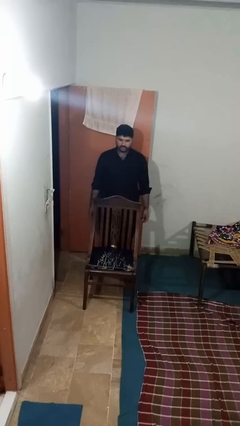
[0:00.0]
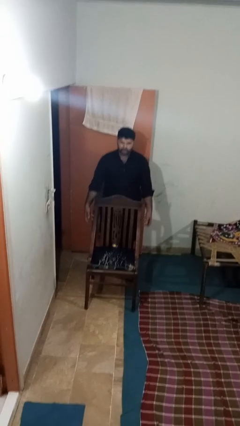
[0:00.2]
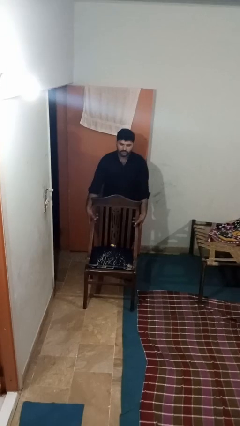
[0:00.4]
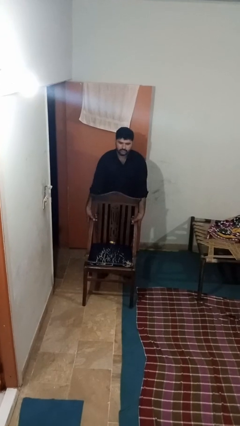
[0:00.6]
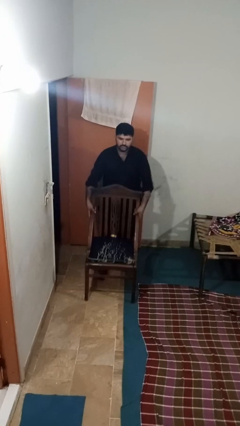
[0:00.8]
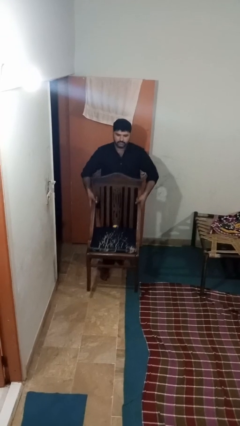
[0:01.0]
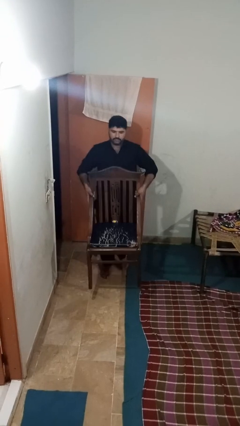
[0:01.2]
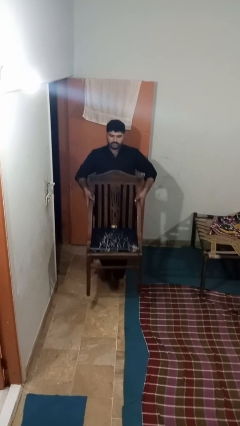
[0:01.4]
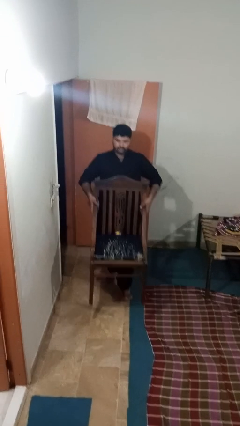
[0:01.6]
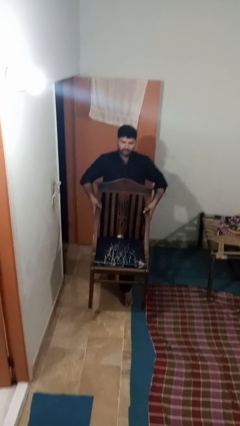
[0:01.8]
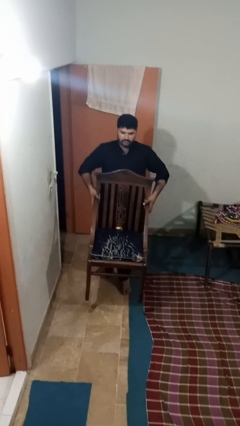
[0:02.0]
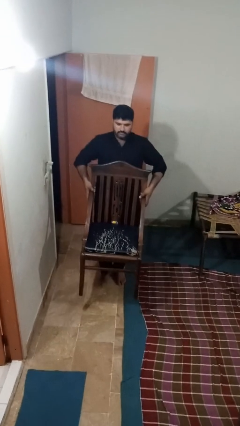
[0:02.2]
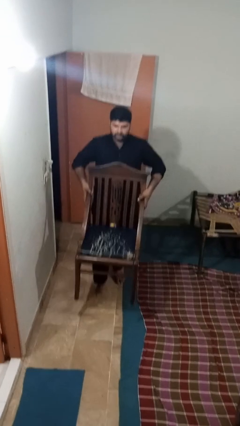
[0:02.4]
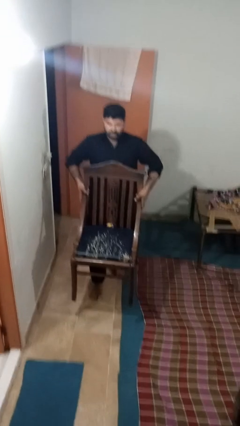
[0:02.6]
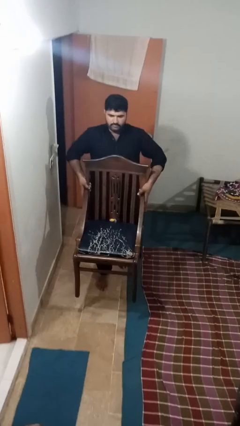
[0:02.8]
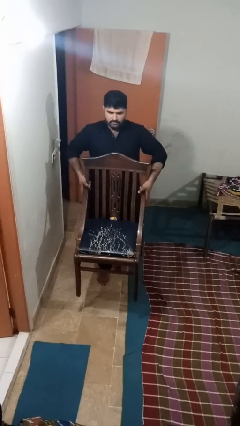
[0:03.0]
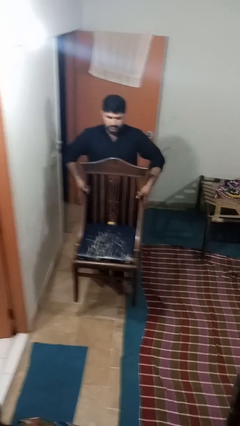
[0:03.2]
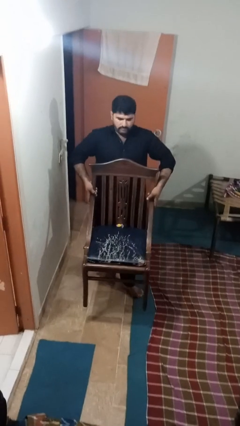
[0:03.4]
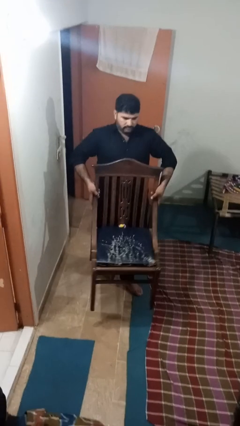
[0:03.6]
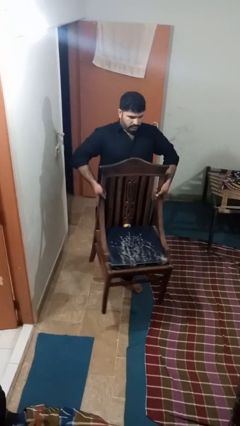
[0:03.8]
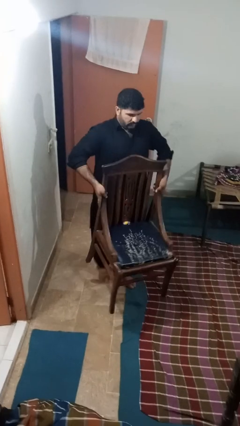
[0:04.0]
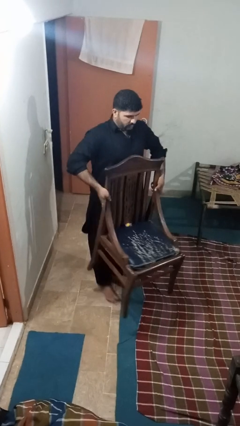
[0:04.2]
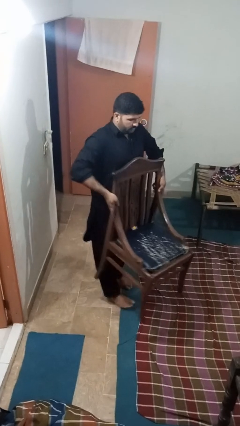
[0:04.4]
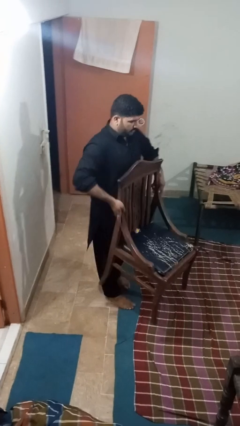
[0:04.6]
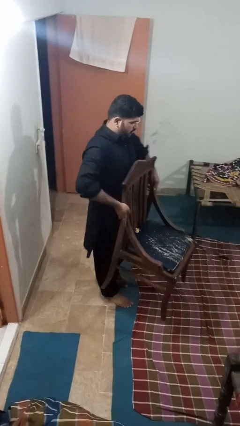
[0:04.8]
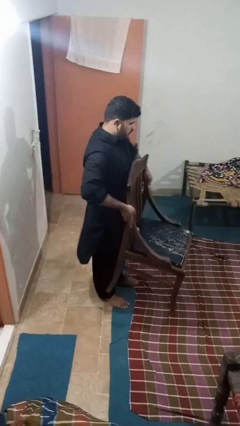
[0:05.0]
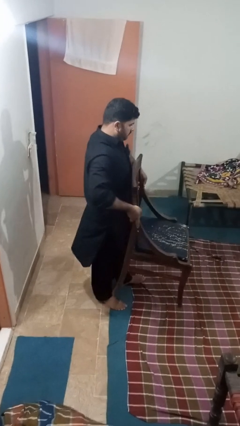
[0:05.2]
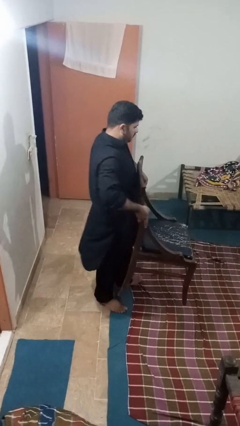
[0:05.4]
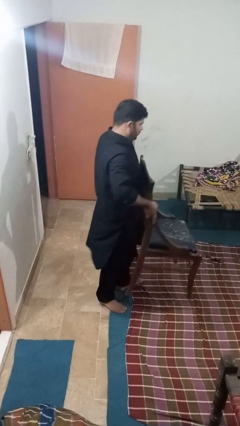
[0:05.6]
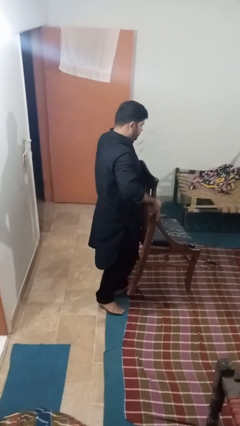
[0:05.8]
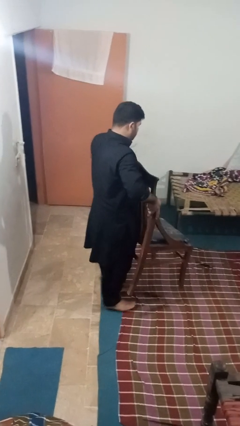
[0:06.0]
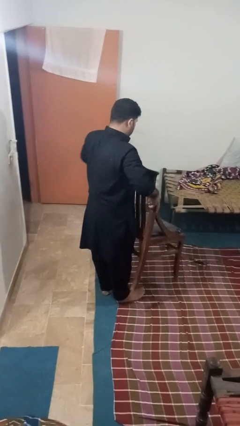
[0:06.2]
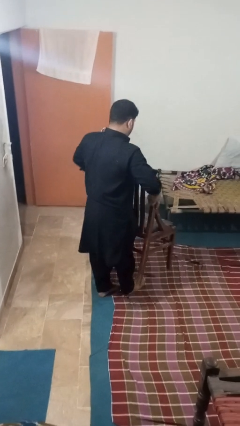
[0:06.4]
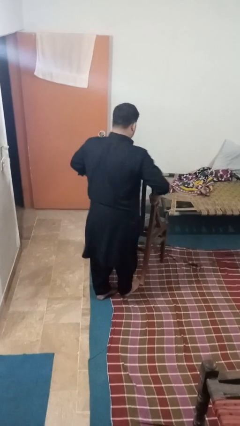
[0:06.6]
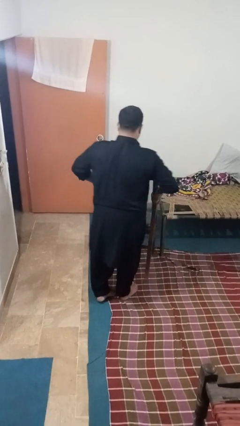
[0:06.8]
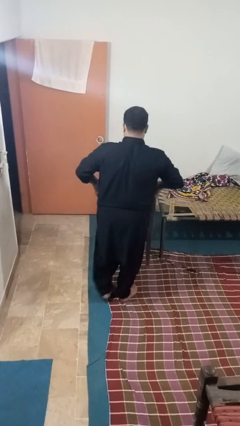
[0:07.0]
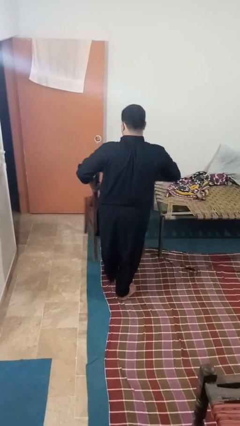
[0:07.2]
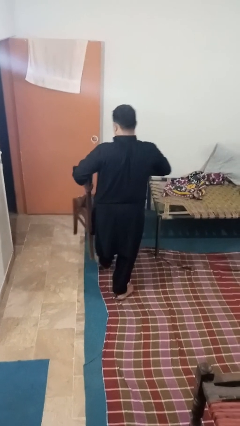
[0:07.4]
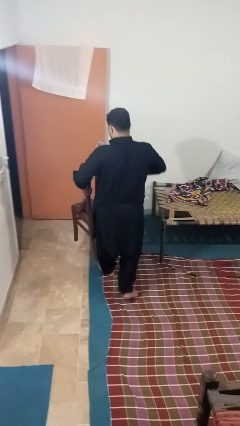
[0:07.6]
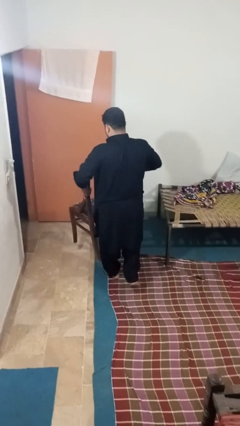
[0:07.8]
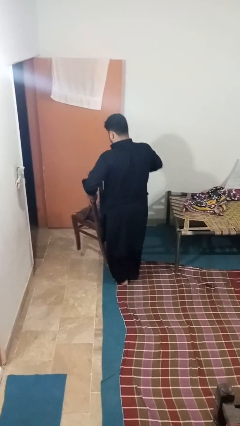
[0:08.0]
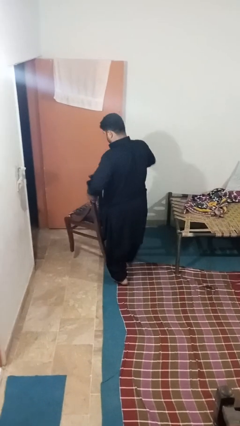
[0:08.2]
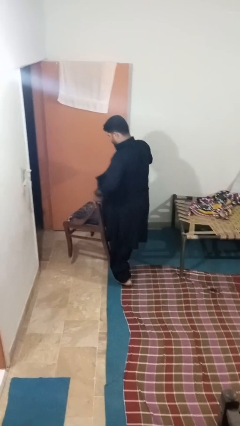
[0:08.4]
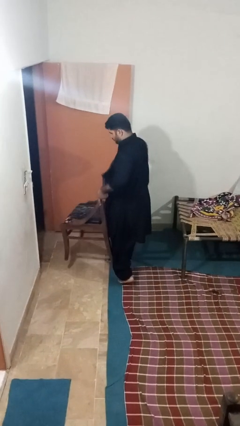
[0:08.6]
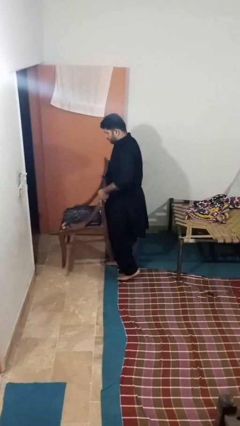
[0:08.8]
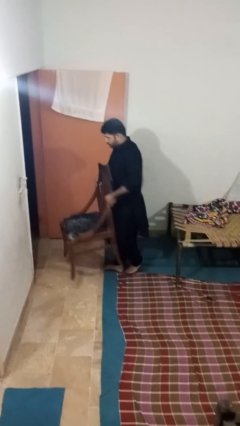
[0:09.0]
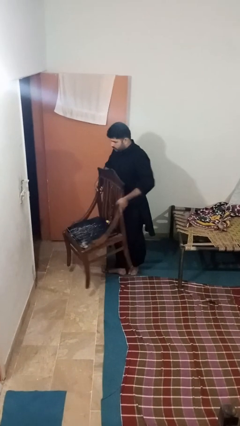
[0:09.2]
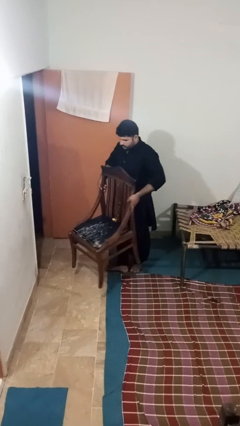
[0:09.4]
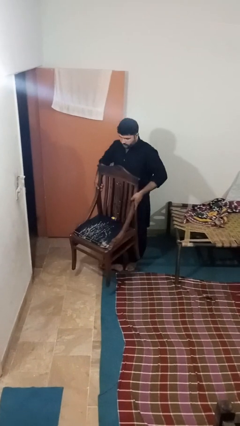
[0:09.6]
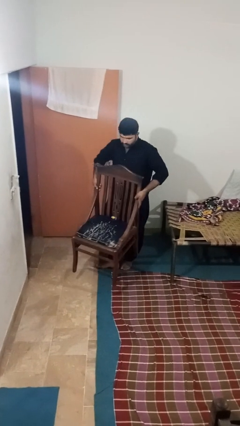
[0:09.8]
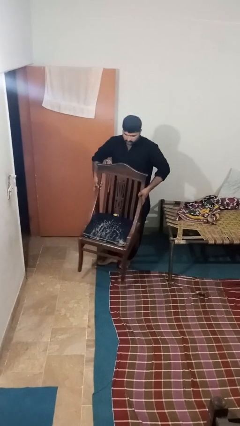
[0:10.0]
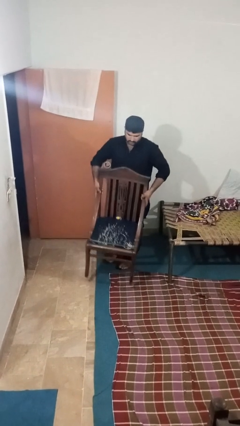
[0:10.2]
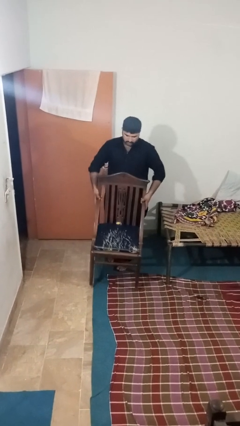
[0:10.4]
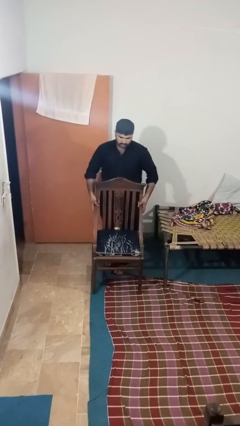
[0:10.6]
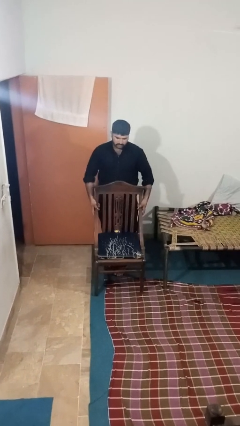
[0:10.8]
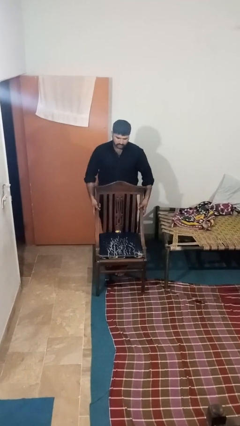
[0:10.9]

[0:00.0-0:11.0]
person carries furniture

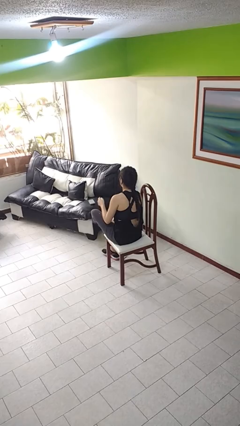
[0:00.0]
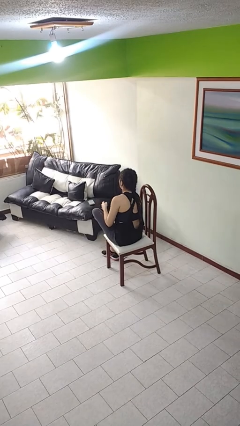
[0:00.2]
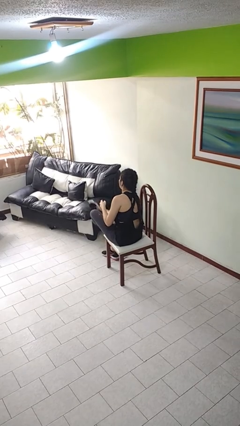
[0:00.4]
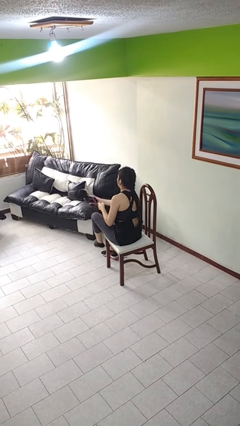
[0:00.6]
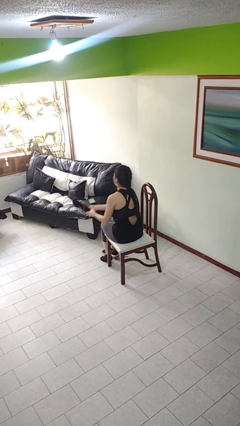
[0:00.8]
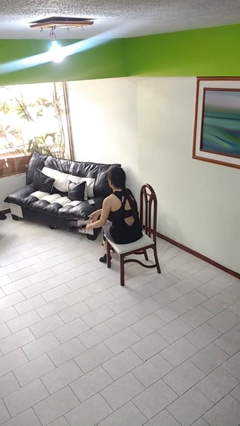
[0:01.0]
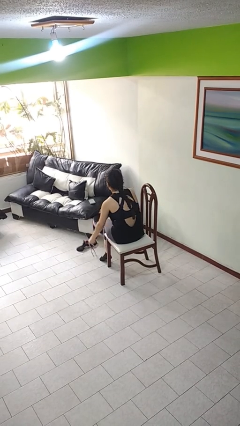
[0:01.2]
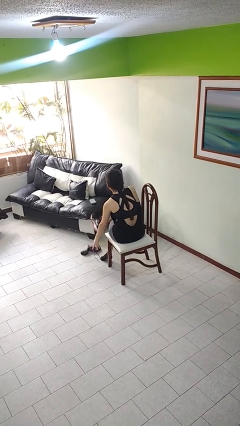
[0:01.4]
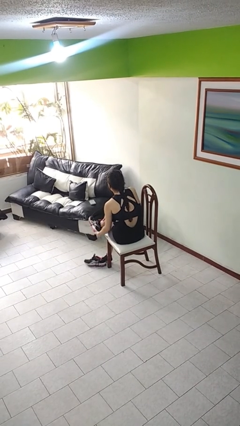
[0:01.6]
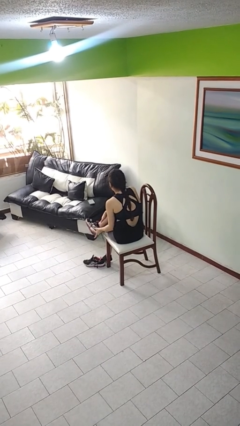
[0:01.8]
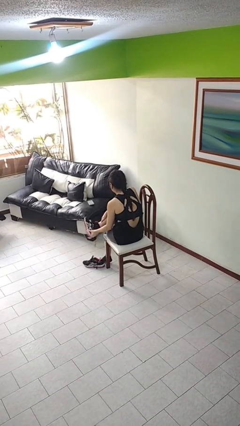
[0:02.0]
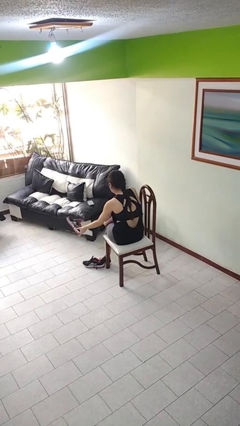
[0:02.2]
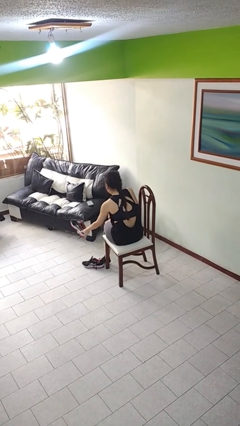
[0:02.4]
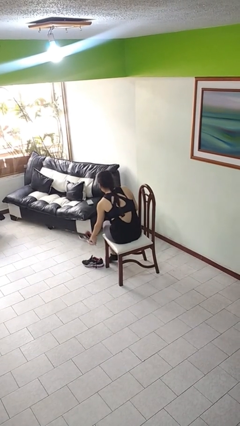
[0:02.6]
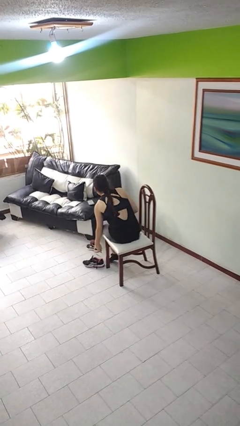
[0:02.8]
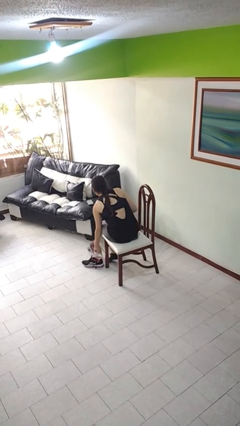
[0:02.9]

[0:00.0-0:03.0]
person takes off shoes

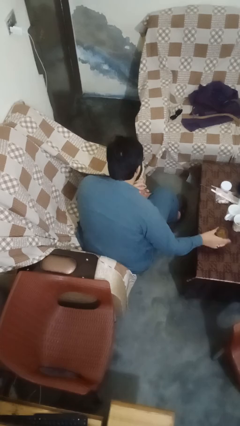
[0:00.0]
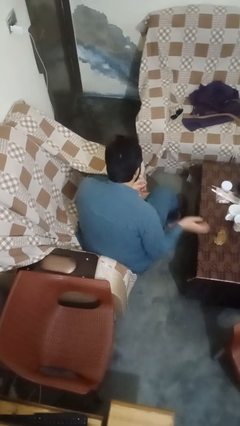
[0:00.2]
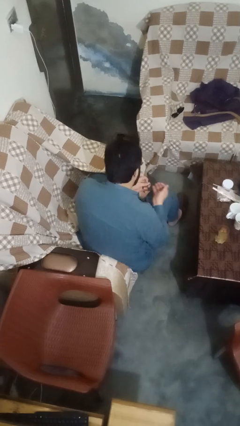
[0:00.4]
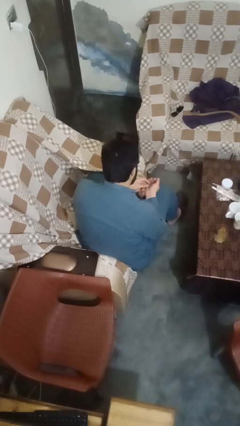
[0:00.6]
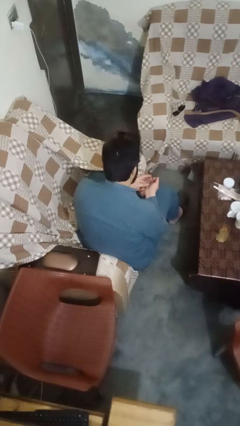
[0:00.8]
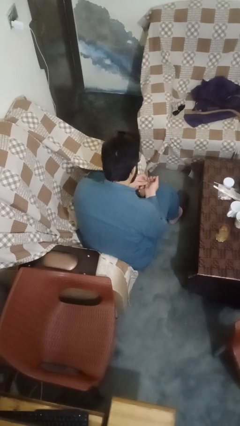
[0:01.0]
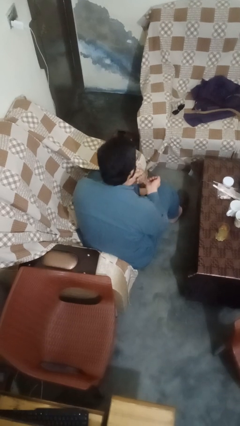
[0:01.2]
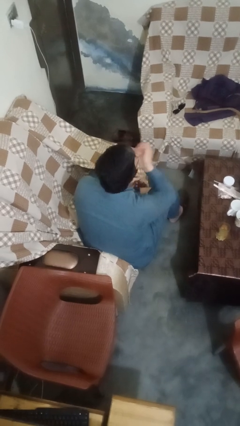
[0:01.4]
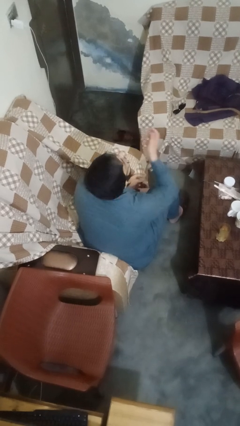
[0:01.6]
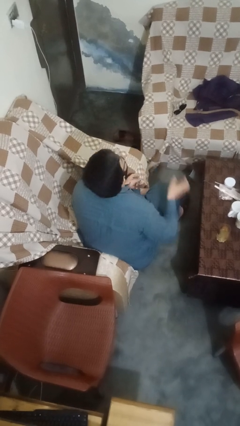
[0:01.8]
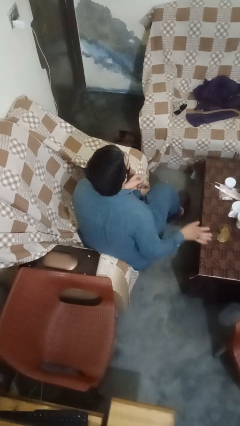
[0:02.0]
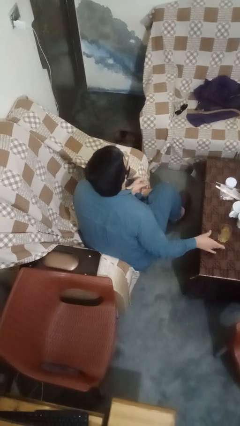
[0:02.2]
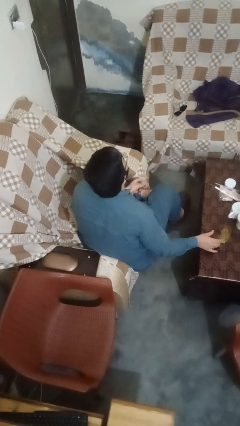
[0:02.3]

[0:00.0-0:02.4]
person takes medicine pills

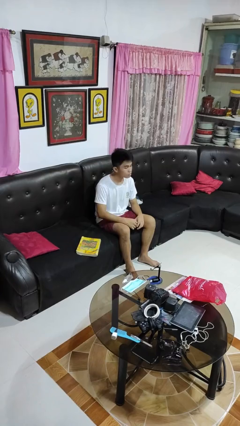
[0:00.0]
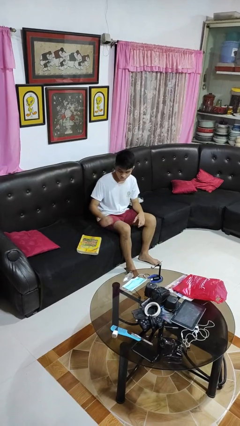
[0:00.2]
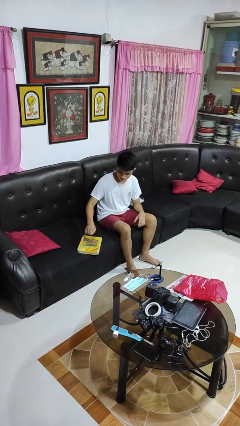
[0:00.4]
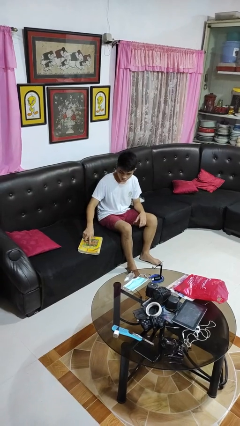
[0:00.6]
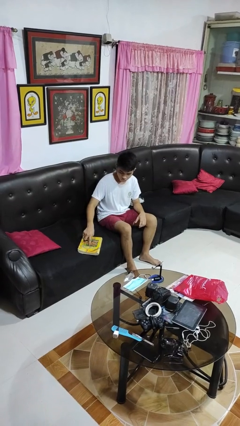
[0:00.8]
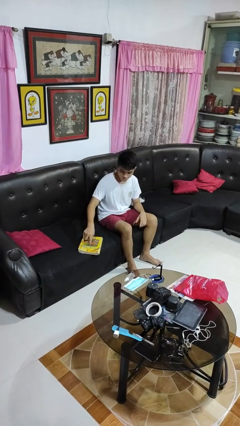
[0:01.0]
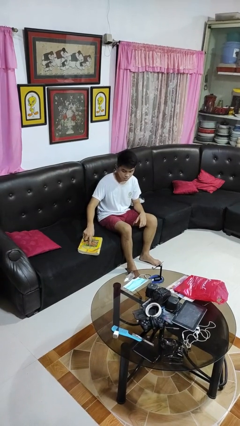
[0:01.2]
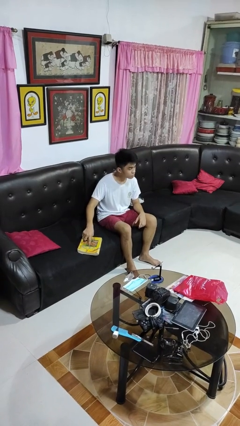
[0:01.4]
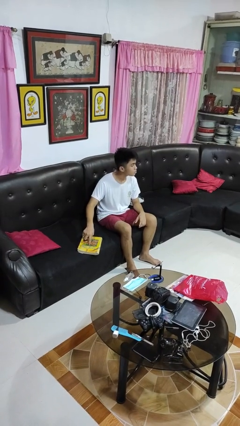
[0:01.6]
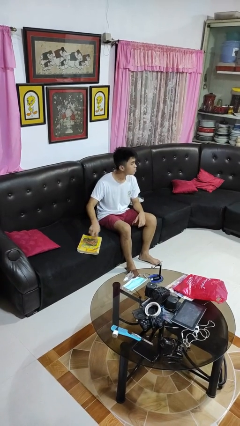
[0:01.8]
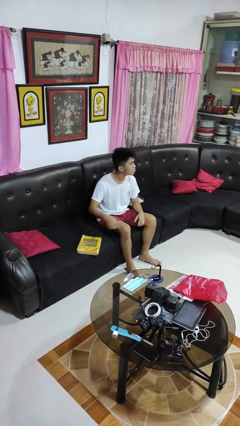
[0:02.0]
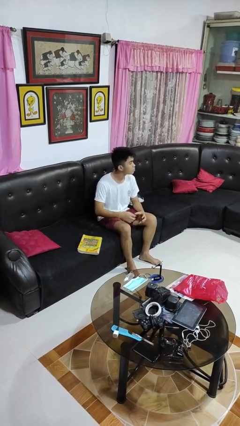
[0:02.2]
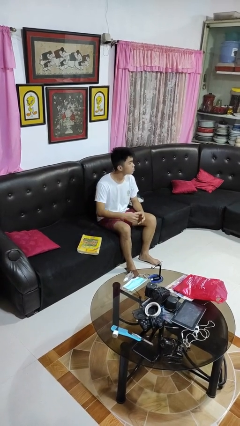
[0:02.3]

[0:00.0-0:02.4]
person taps object with finger
